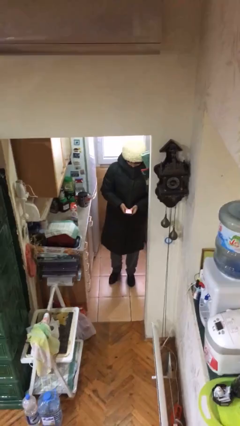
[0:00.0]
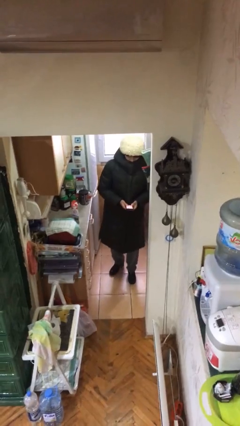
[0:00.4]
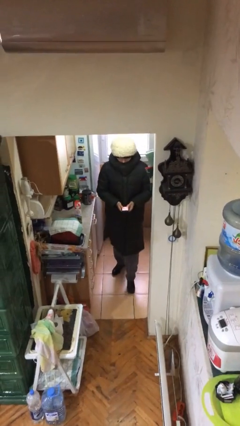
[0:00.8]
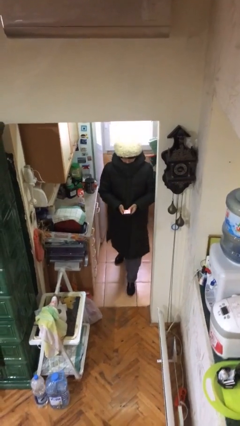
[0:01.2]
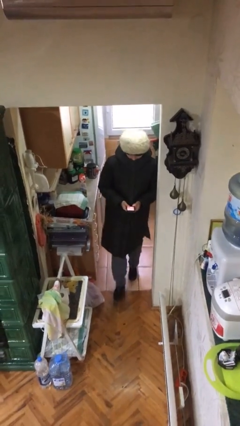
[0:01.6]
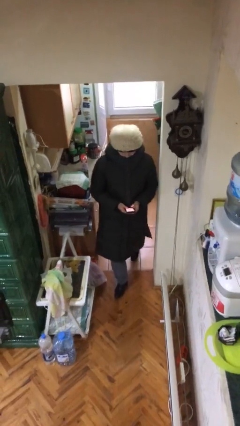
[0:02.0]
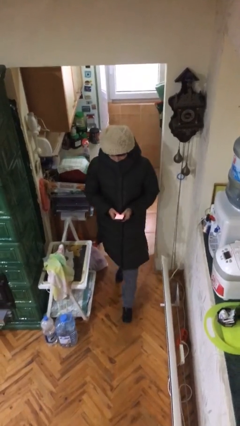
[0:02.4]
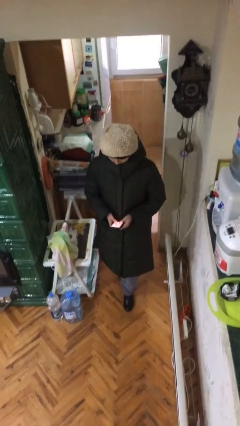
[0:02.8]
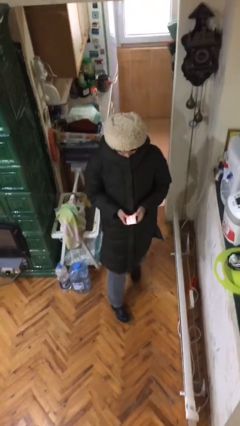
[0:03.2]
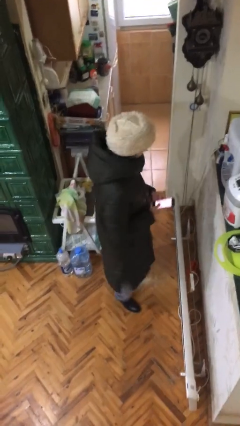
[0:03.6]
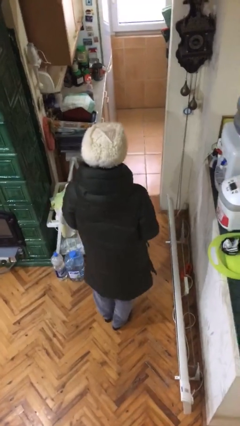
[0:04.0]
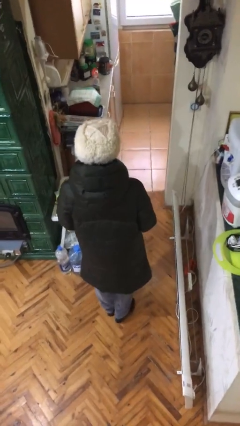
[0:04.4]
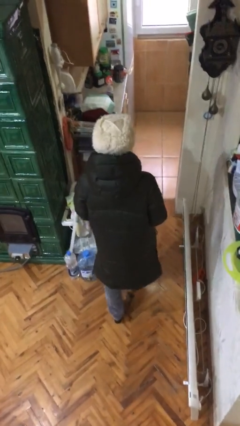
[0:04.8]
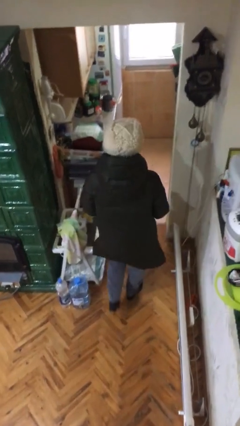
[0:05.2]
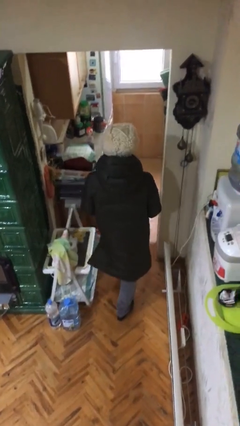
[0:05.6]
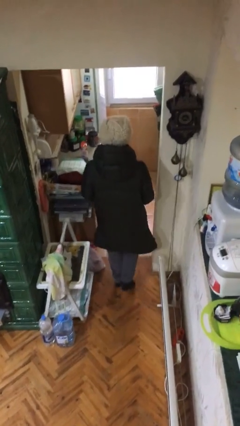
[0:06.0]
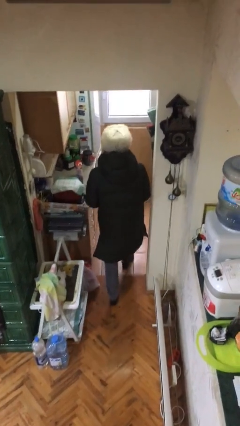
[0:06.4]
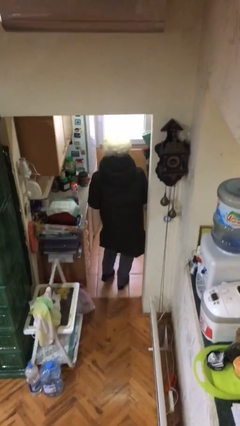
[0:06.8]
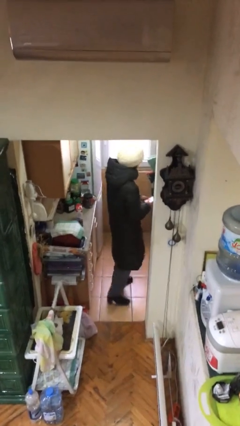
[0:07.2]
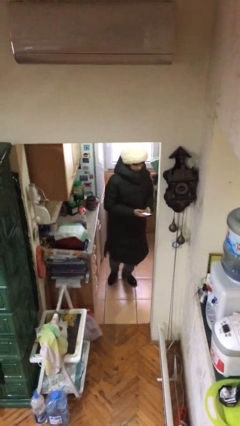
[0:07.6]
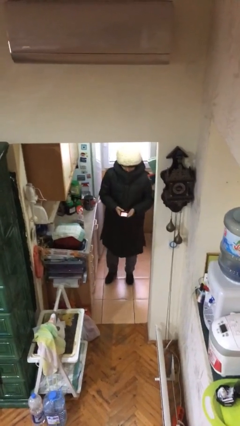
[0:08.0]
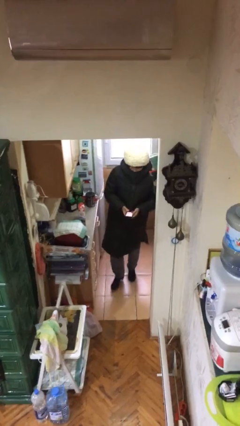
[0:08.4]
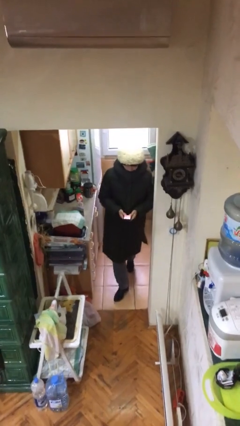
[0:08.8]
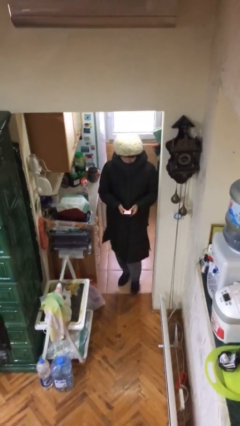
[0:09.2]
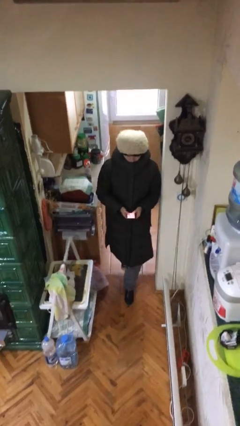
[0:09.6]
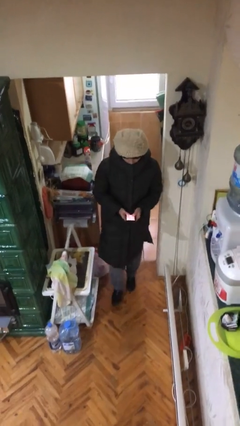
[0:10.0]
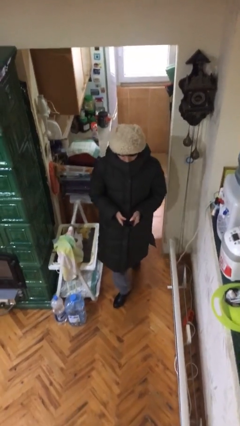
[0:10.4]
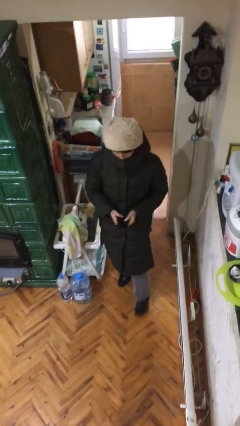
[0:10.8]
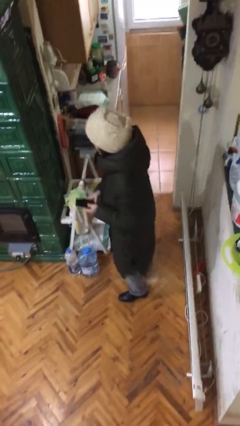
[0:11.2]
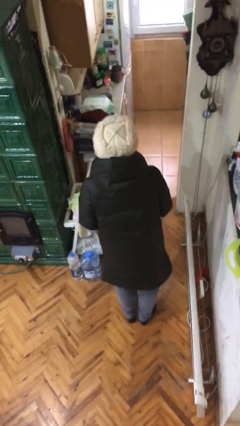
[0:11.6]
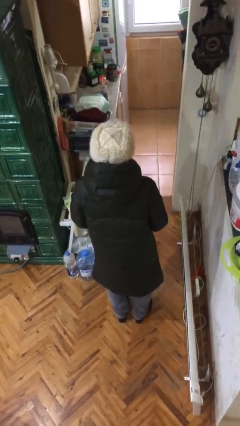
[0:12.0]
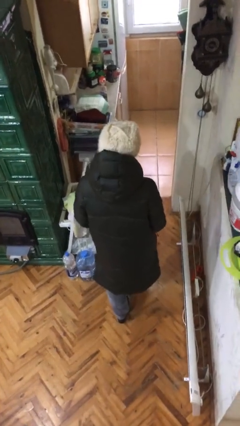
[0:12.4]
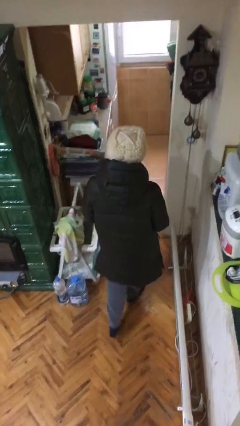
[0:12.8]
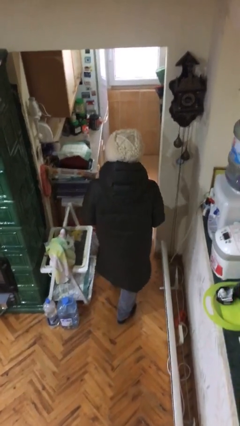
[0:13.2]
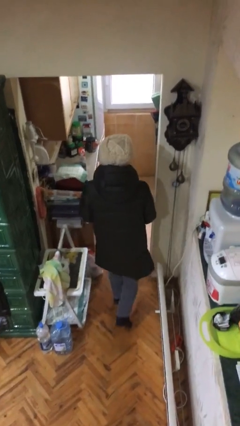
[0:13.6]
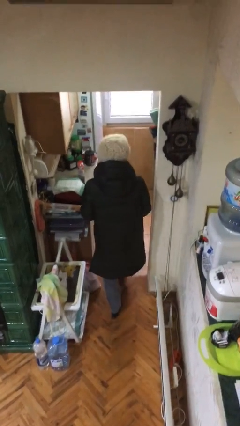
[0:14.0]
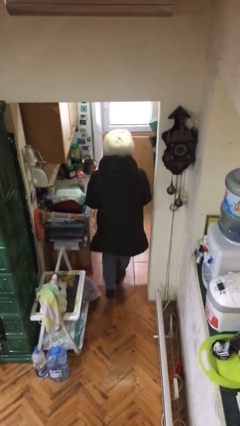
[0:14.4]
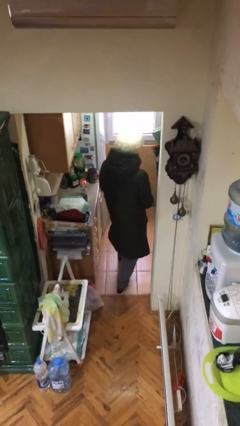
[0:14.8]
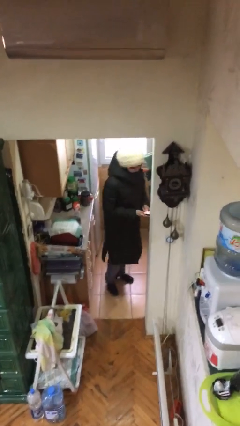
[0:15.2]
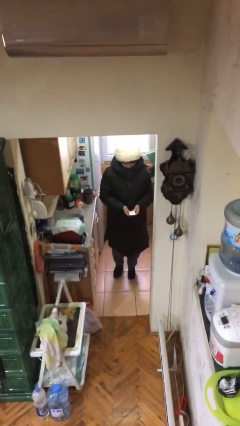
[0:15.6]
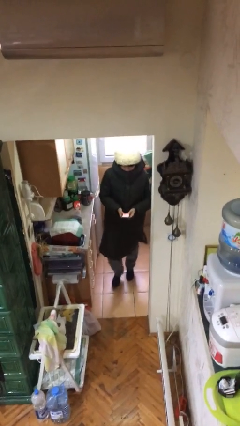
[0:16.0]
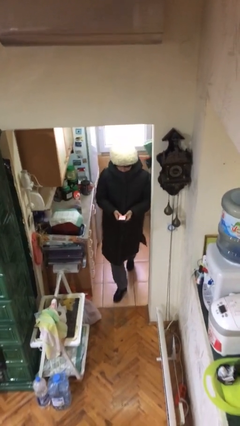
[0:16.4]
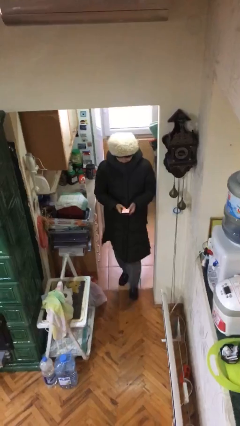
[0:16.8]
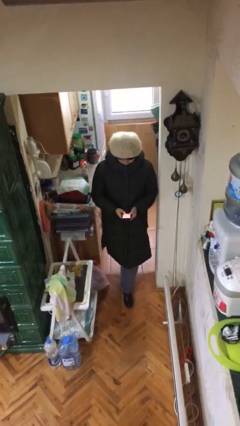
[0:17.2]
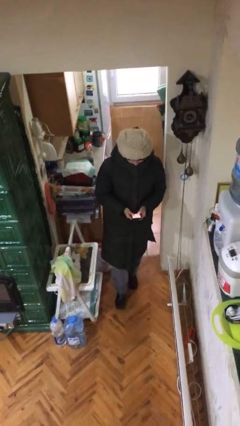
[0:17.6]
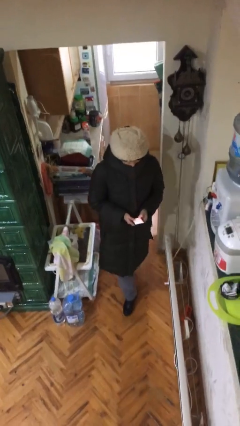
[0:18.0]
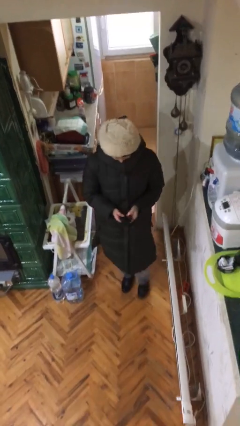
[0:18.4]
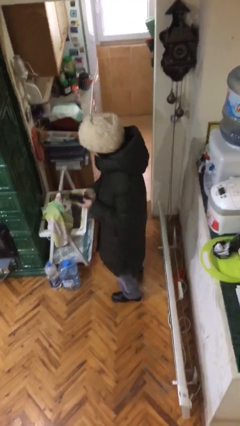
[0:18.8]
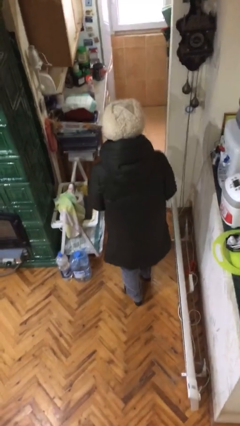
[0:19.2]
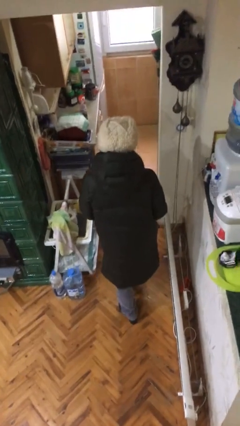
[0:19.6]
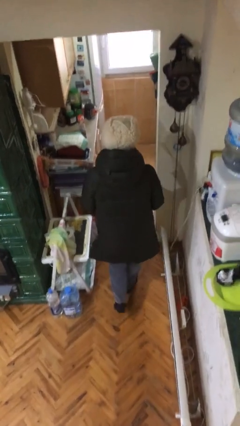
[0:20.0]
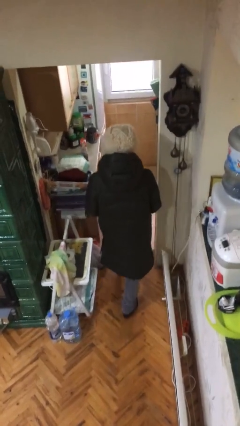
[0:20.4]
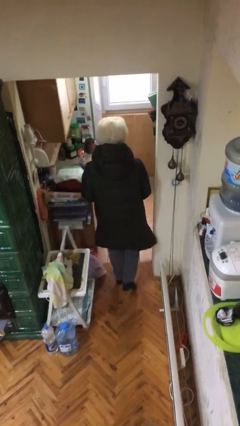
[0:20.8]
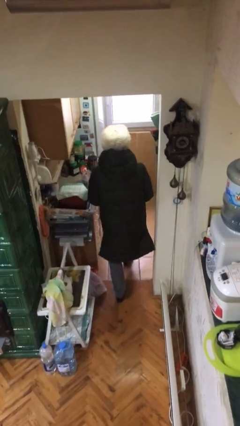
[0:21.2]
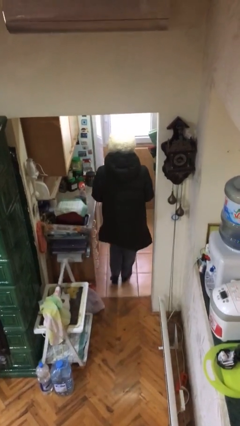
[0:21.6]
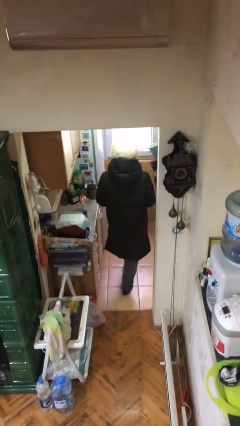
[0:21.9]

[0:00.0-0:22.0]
person texts on phone

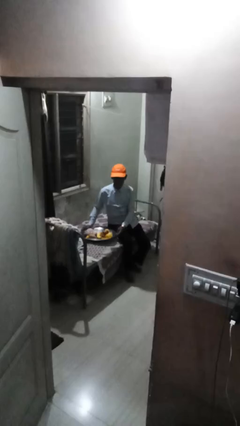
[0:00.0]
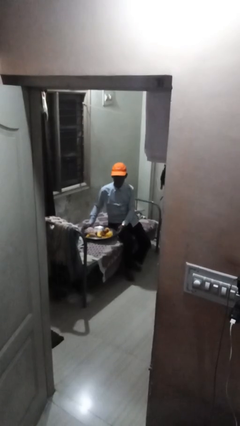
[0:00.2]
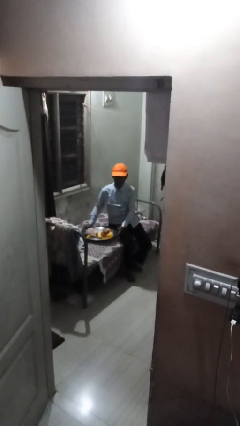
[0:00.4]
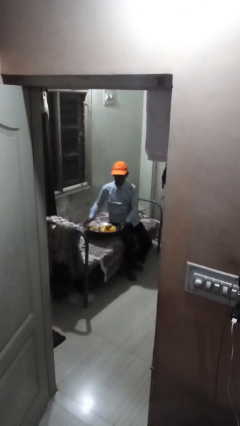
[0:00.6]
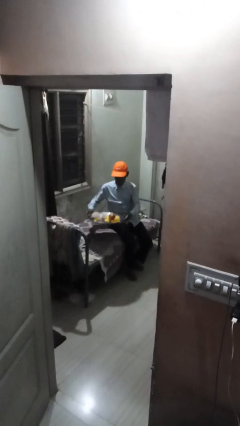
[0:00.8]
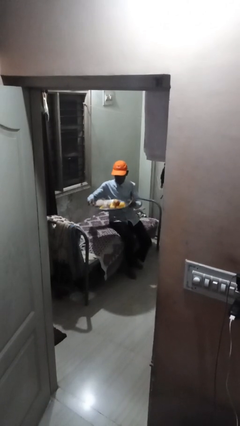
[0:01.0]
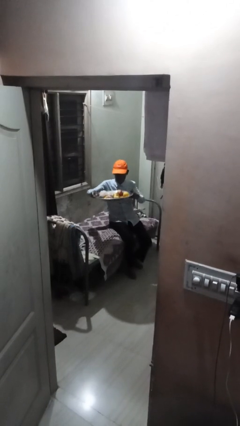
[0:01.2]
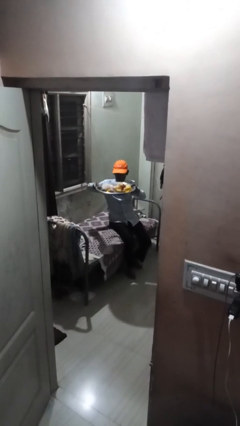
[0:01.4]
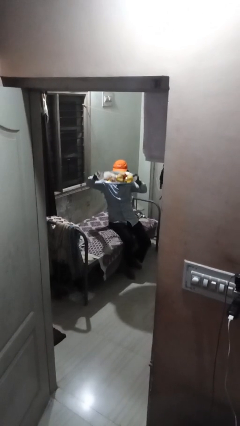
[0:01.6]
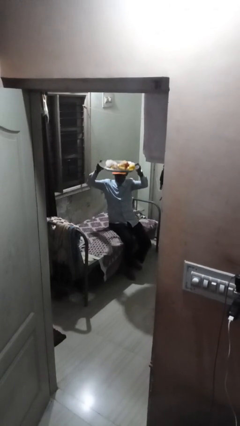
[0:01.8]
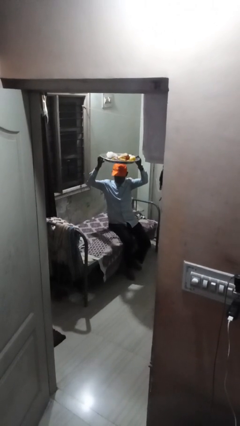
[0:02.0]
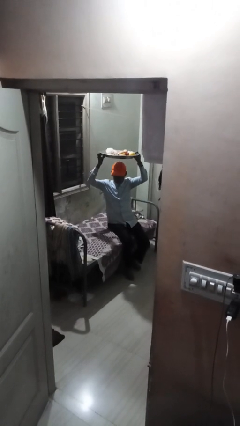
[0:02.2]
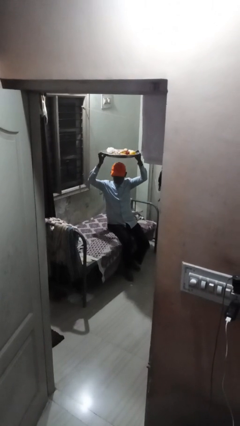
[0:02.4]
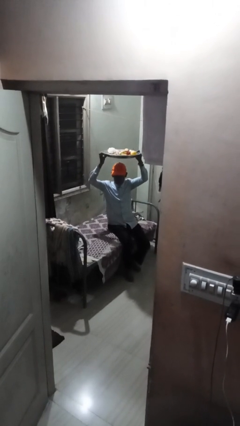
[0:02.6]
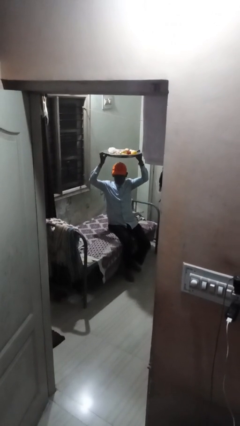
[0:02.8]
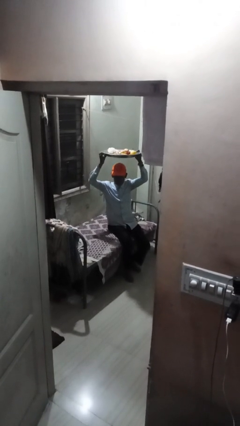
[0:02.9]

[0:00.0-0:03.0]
person holds object above head

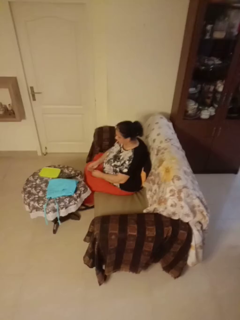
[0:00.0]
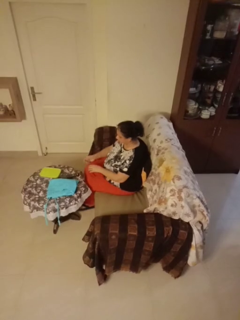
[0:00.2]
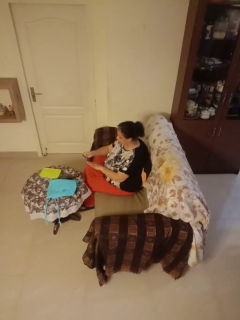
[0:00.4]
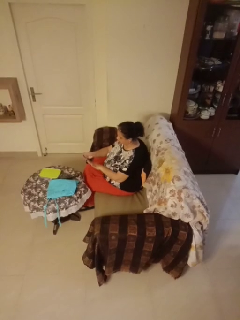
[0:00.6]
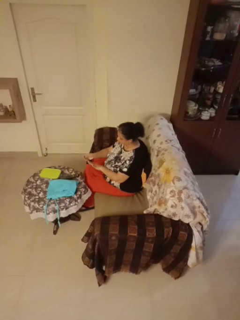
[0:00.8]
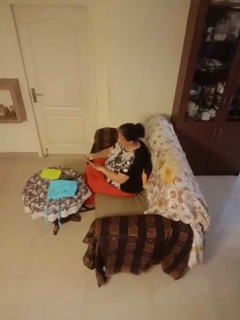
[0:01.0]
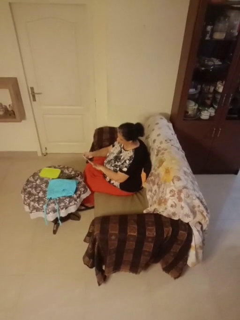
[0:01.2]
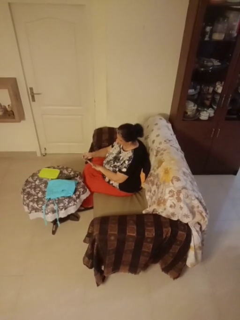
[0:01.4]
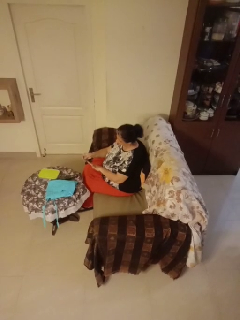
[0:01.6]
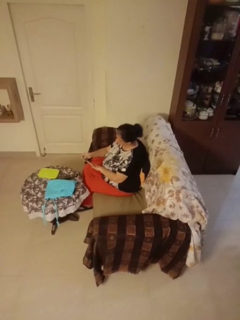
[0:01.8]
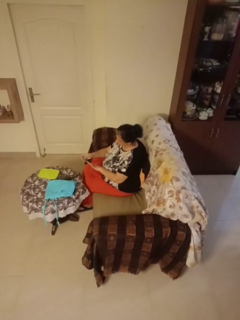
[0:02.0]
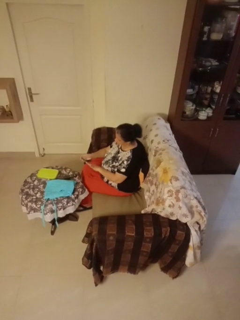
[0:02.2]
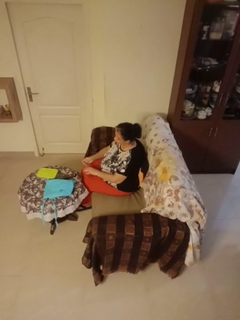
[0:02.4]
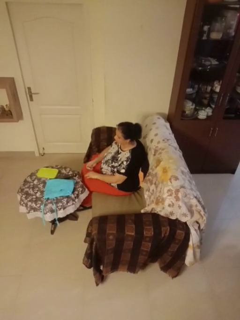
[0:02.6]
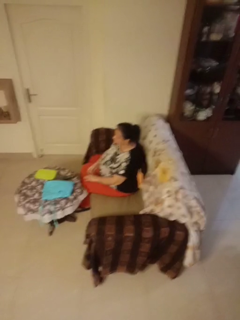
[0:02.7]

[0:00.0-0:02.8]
person clips fingernails

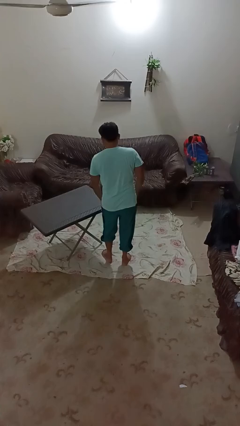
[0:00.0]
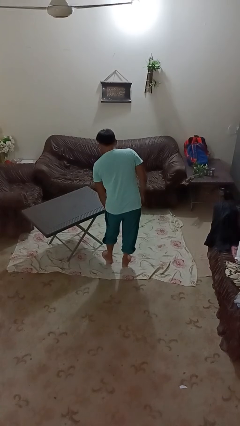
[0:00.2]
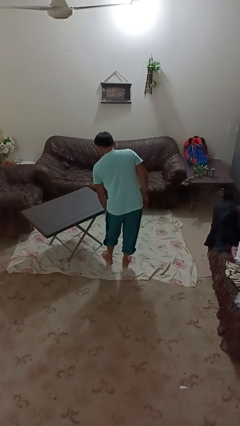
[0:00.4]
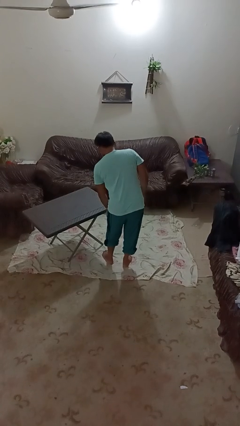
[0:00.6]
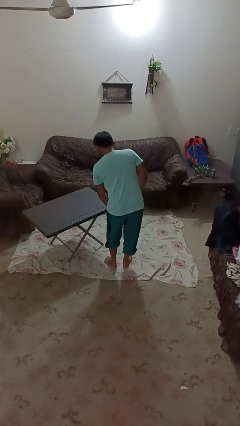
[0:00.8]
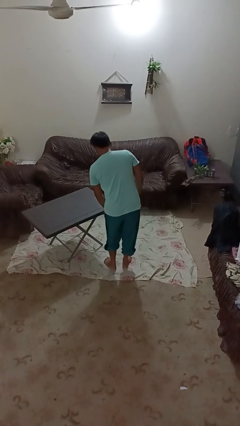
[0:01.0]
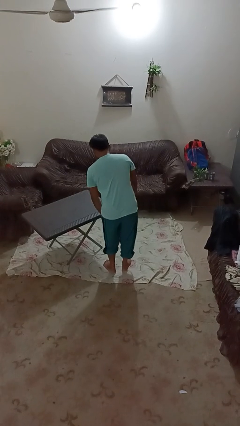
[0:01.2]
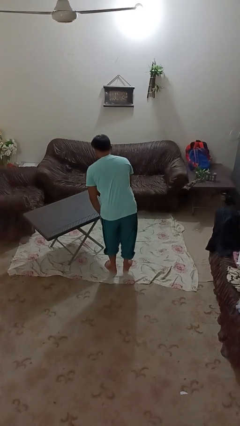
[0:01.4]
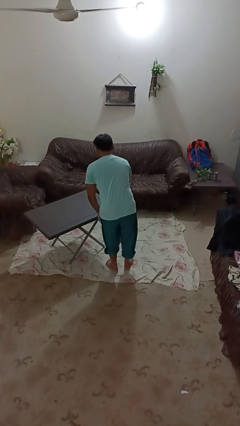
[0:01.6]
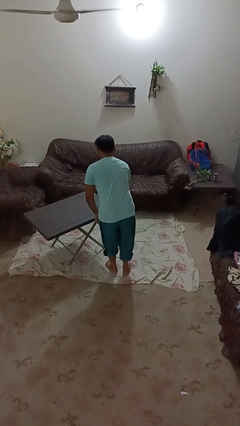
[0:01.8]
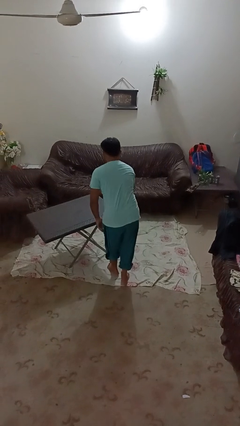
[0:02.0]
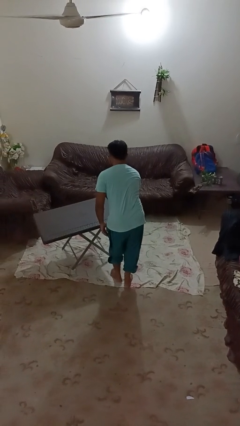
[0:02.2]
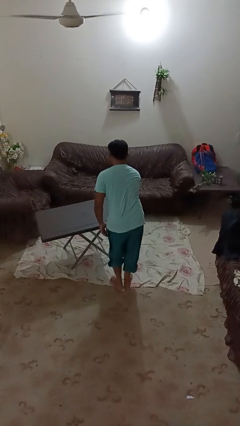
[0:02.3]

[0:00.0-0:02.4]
person bumps into table
